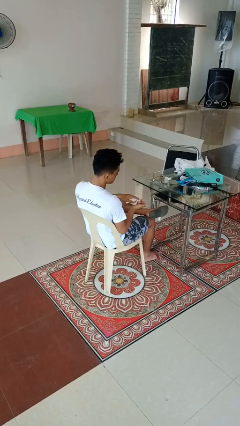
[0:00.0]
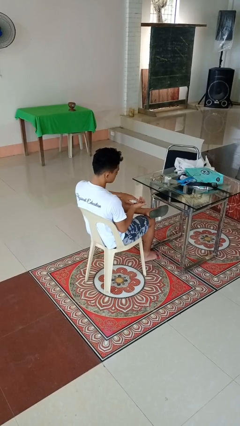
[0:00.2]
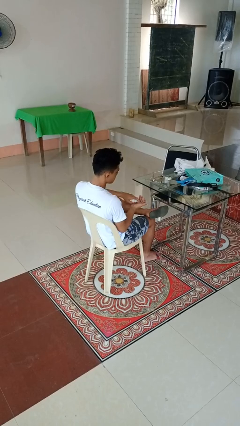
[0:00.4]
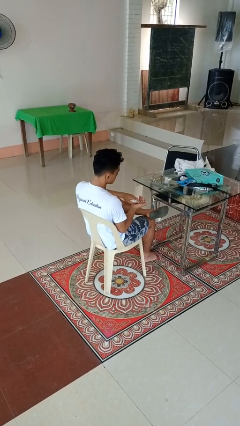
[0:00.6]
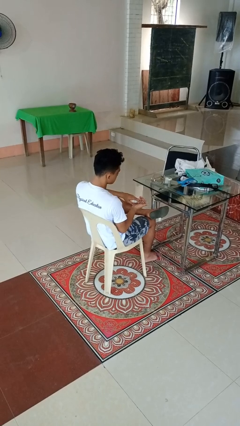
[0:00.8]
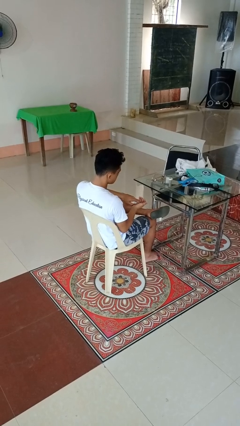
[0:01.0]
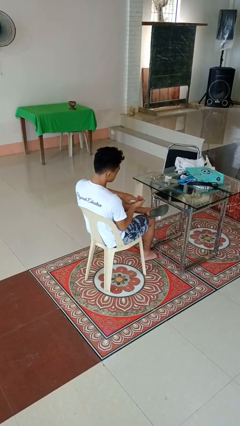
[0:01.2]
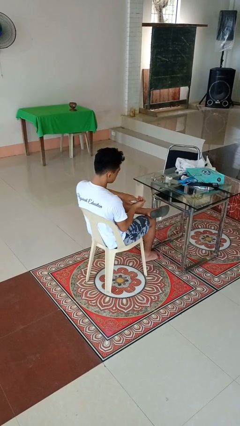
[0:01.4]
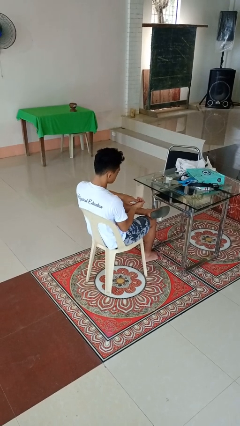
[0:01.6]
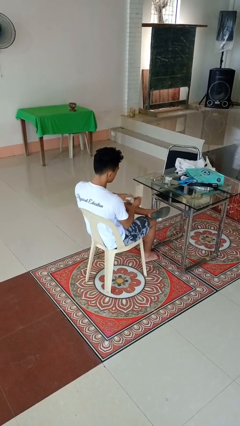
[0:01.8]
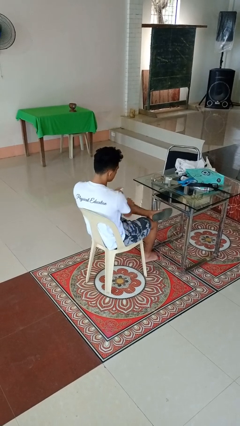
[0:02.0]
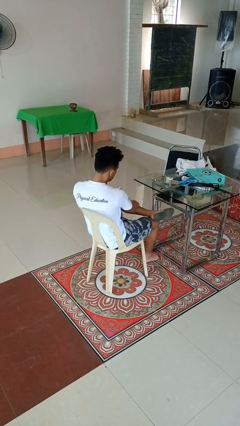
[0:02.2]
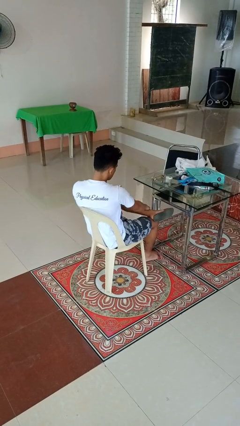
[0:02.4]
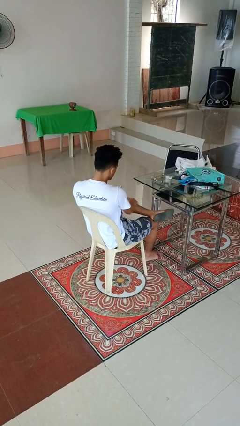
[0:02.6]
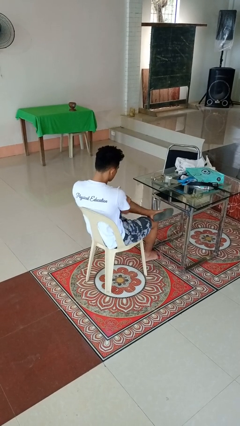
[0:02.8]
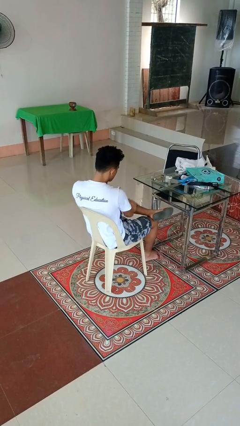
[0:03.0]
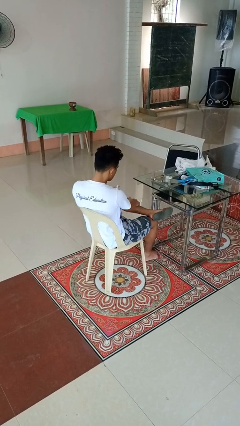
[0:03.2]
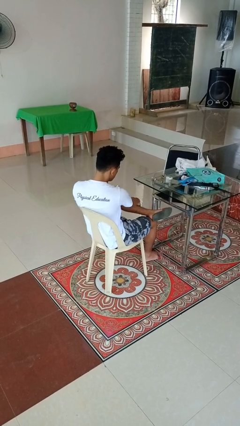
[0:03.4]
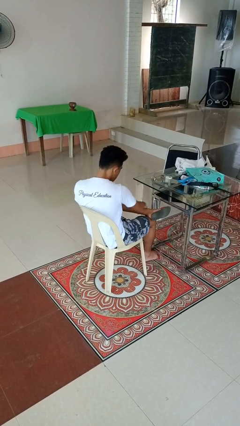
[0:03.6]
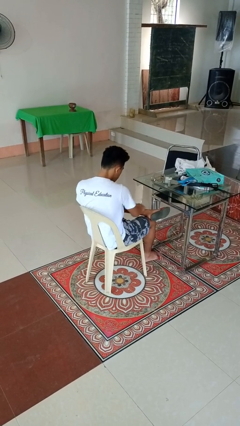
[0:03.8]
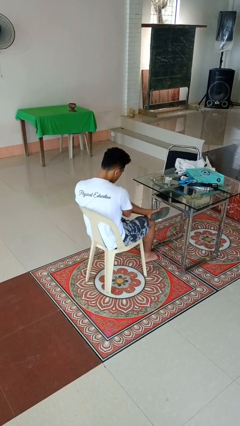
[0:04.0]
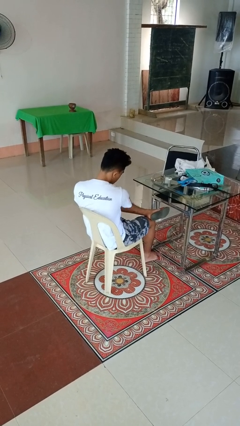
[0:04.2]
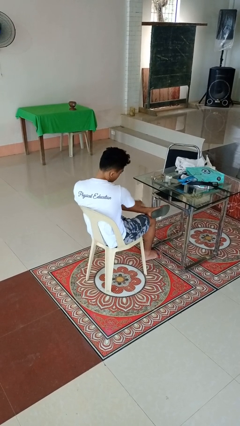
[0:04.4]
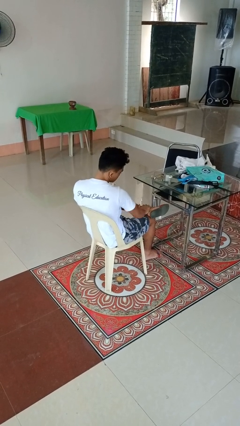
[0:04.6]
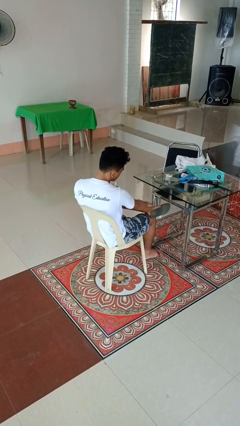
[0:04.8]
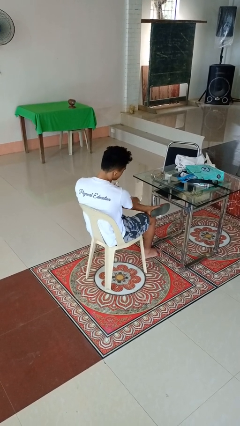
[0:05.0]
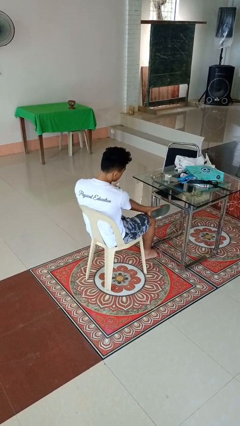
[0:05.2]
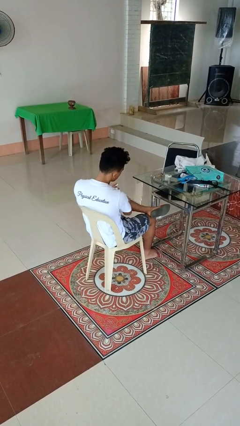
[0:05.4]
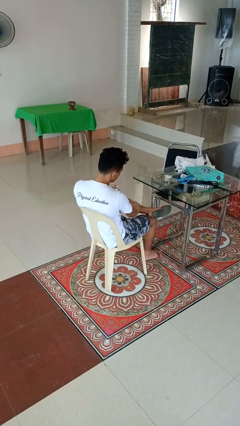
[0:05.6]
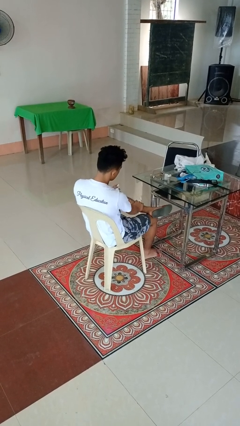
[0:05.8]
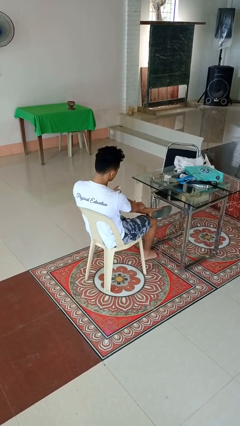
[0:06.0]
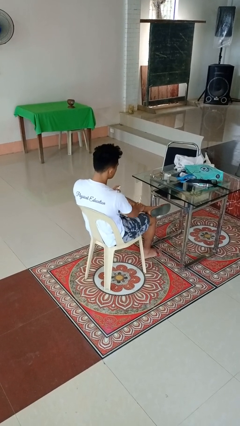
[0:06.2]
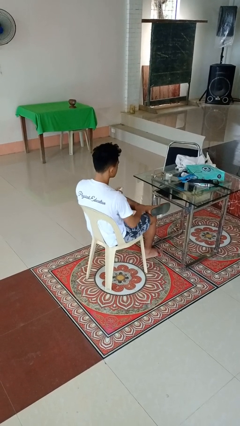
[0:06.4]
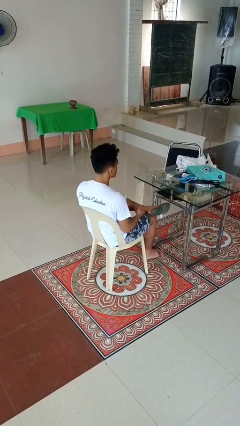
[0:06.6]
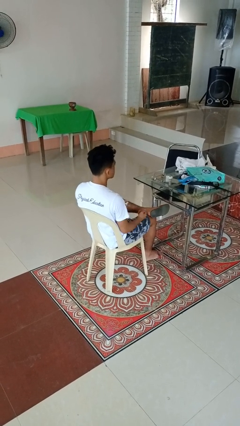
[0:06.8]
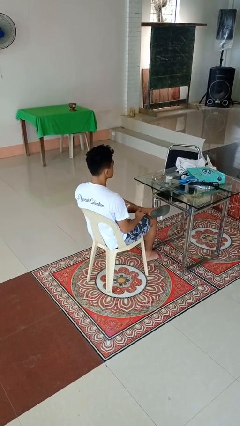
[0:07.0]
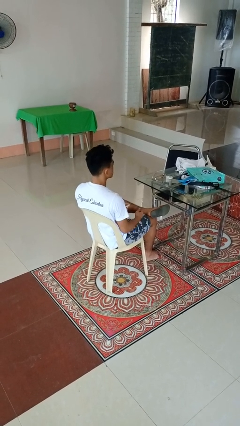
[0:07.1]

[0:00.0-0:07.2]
person applies sunscreen

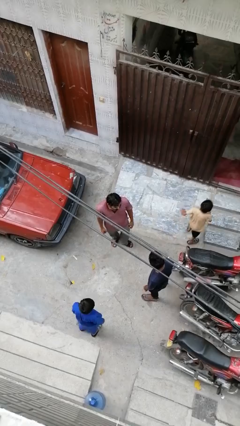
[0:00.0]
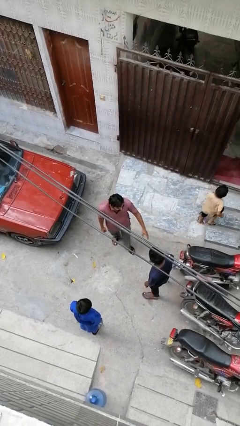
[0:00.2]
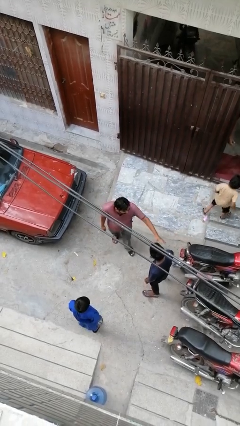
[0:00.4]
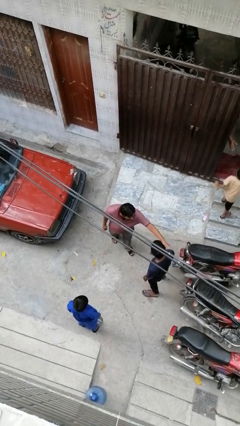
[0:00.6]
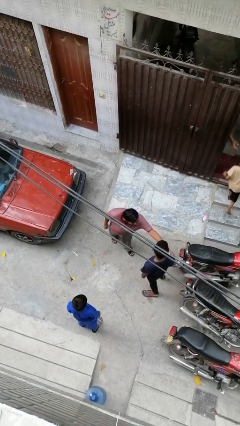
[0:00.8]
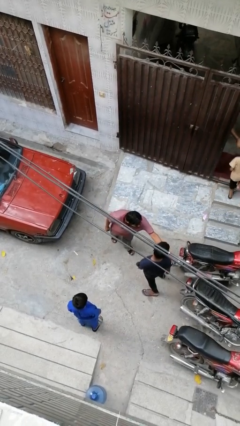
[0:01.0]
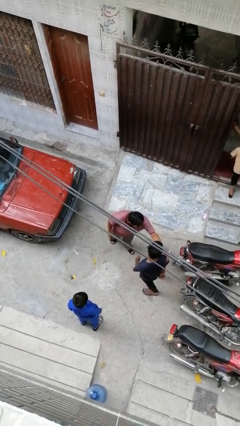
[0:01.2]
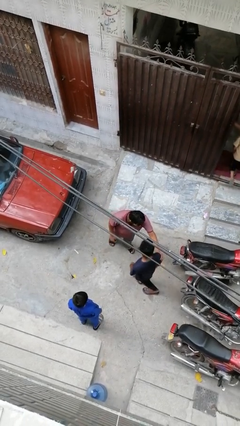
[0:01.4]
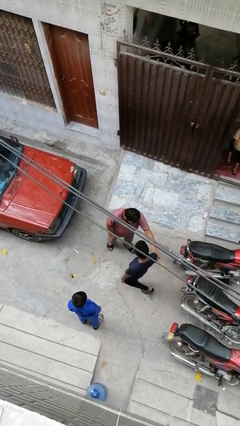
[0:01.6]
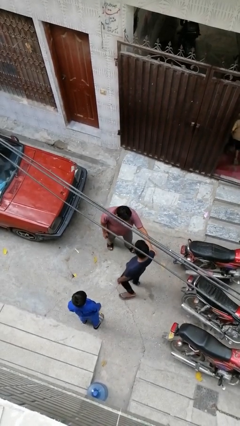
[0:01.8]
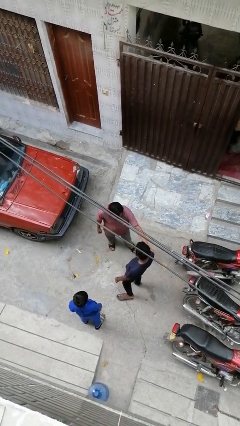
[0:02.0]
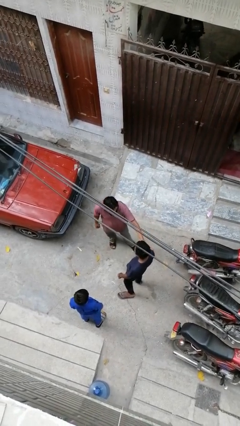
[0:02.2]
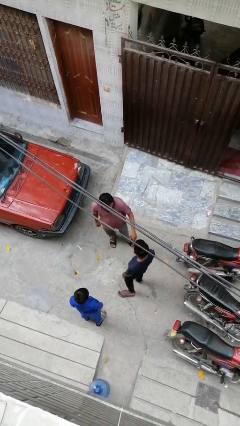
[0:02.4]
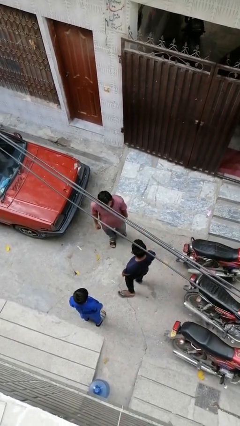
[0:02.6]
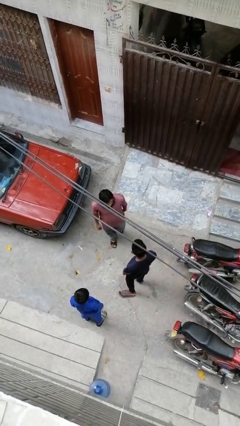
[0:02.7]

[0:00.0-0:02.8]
person shoves person

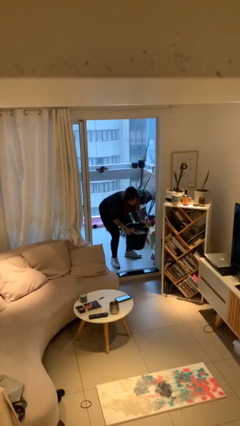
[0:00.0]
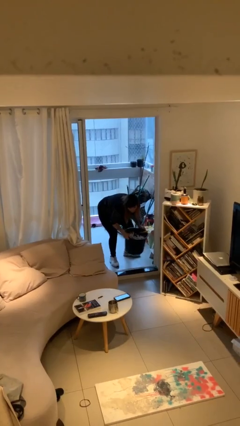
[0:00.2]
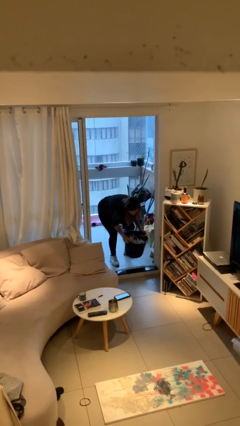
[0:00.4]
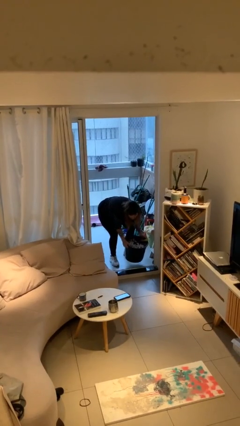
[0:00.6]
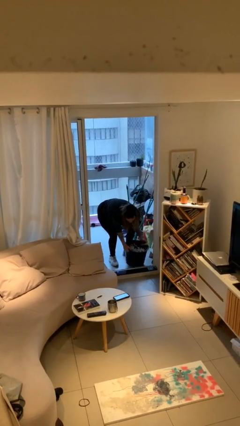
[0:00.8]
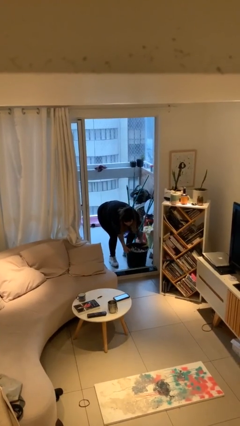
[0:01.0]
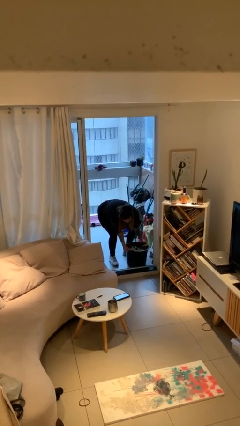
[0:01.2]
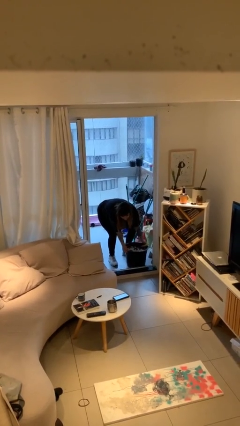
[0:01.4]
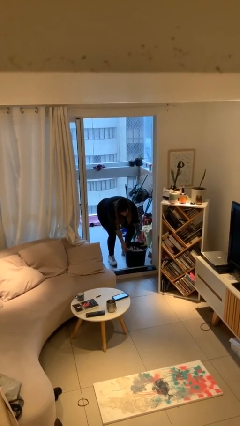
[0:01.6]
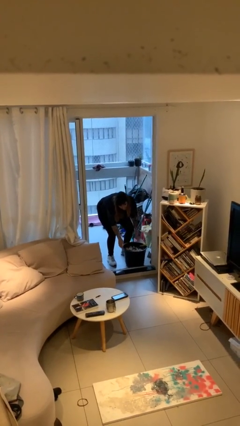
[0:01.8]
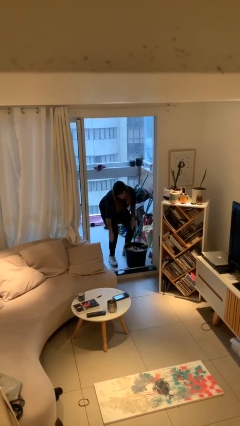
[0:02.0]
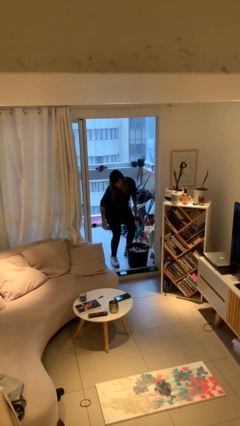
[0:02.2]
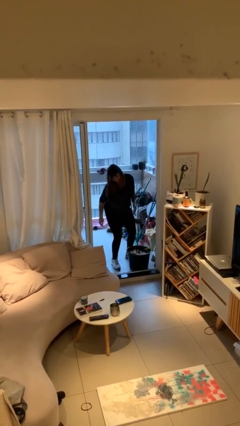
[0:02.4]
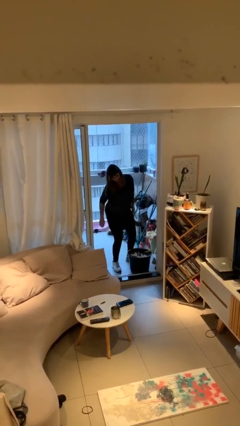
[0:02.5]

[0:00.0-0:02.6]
person puts down object on floor

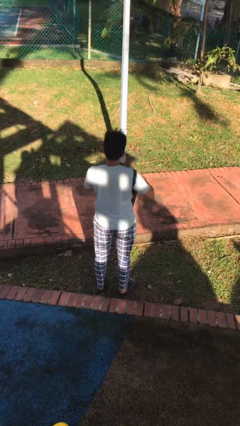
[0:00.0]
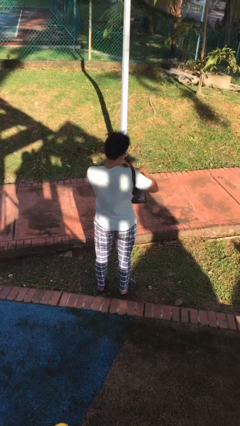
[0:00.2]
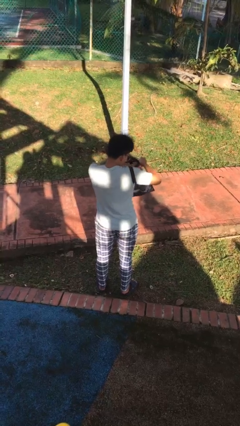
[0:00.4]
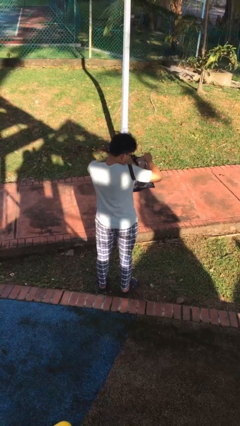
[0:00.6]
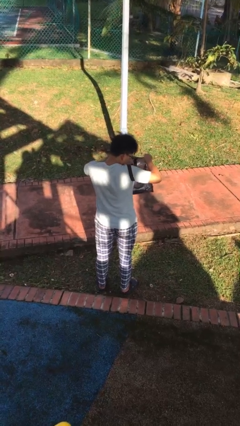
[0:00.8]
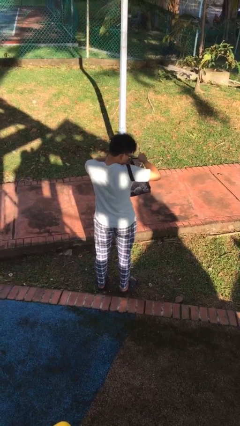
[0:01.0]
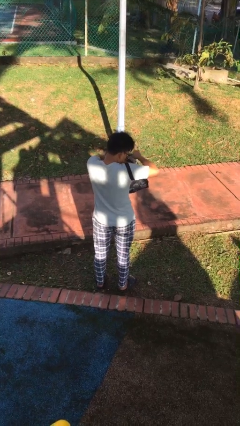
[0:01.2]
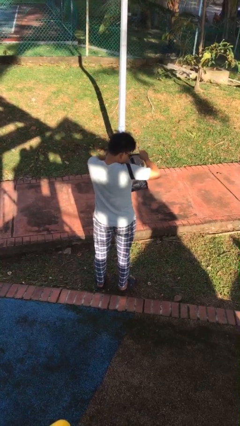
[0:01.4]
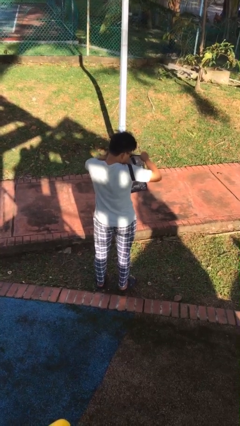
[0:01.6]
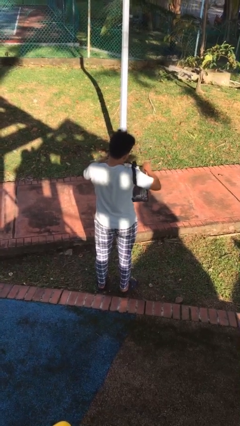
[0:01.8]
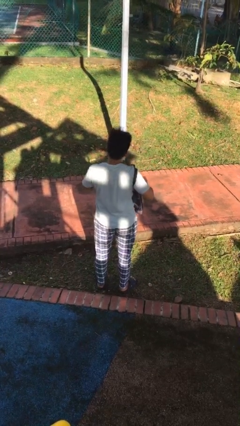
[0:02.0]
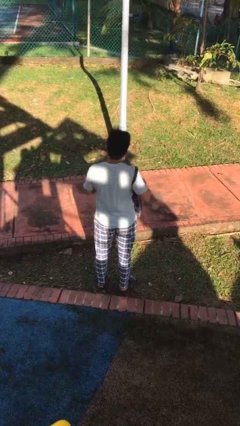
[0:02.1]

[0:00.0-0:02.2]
person searches in bag

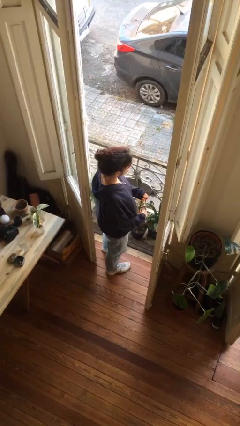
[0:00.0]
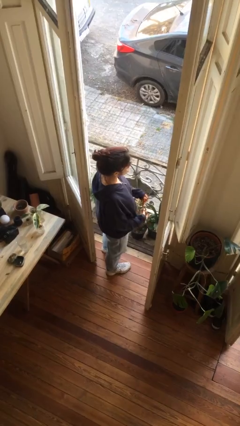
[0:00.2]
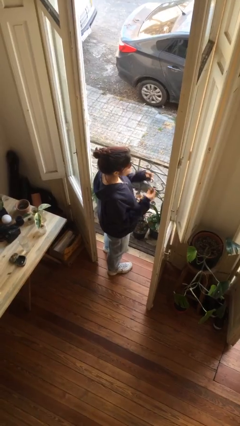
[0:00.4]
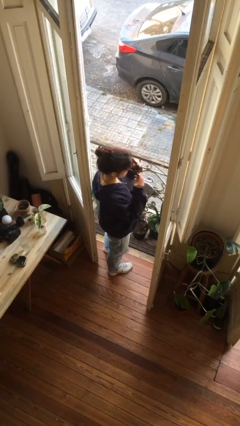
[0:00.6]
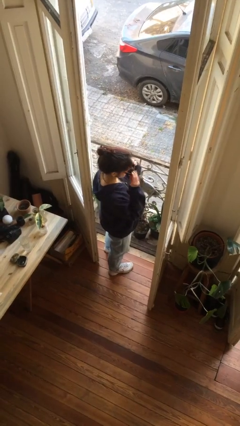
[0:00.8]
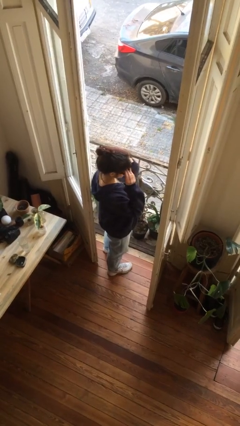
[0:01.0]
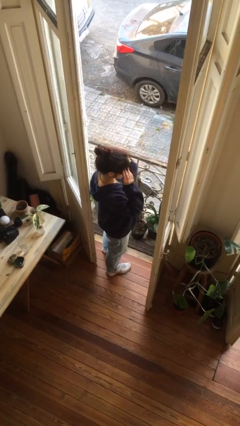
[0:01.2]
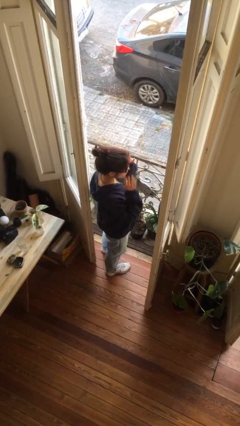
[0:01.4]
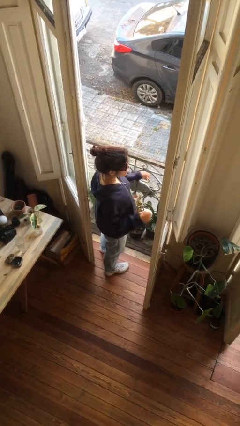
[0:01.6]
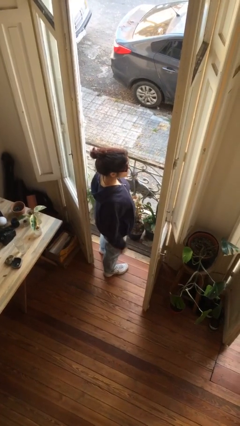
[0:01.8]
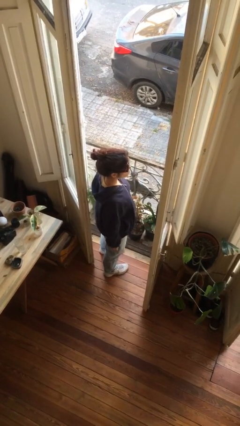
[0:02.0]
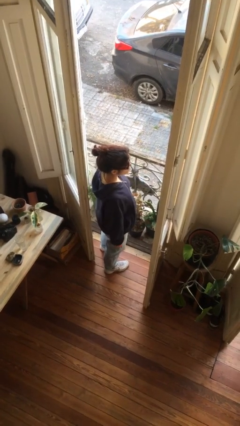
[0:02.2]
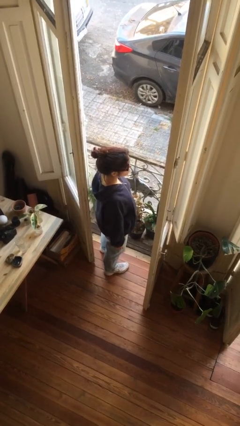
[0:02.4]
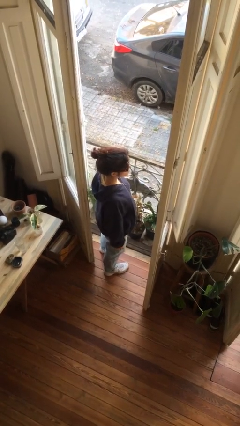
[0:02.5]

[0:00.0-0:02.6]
person puts on sunglasses

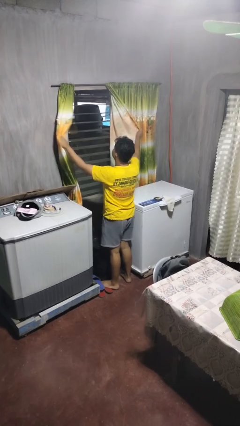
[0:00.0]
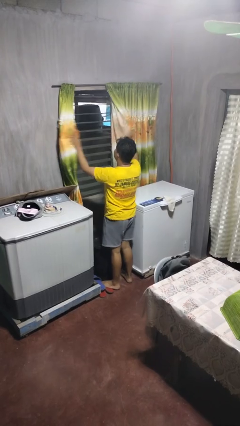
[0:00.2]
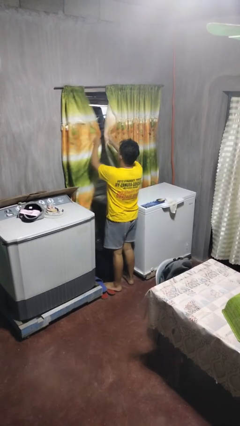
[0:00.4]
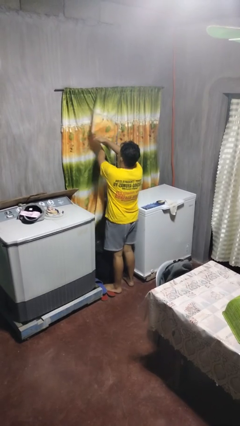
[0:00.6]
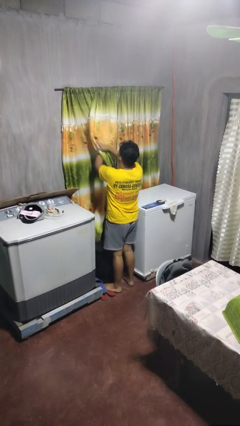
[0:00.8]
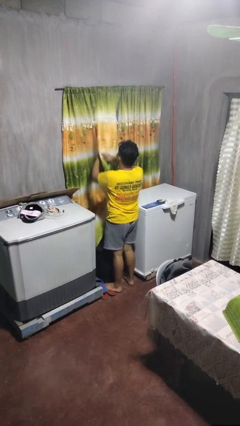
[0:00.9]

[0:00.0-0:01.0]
person closes curtains
